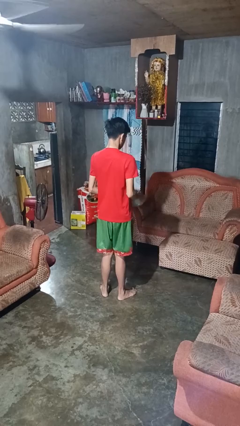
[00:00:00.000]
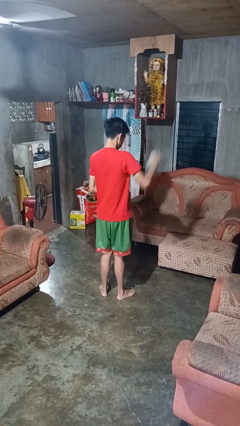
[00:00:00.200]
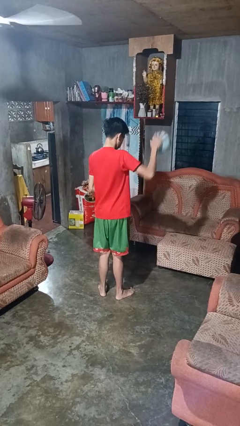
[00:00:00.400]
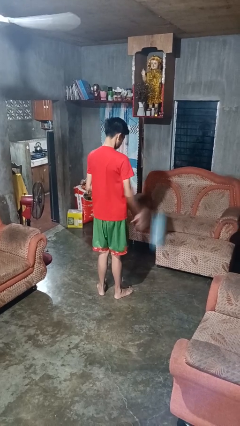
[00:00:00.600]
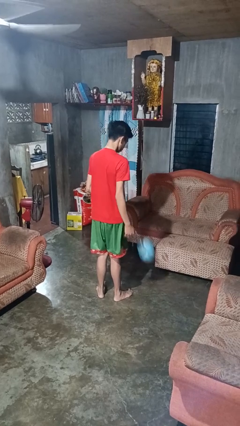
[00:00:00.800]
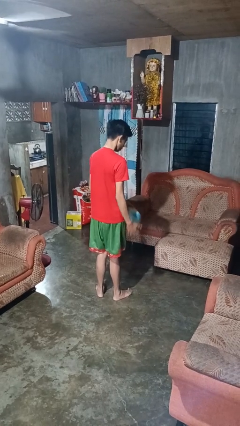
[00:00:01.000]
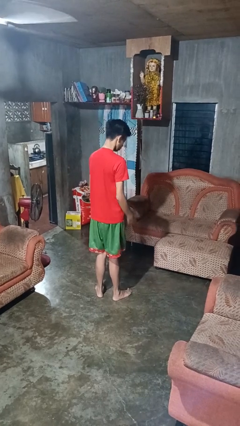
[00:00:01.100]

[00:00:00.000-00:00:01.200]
person bounces ball on floor

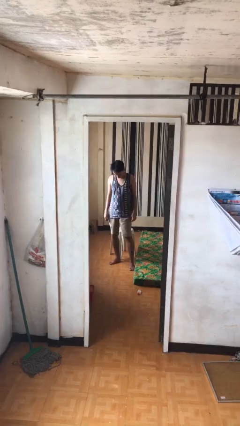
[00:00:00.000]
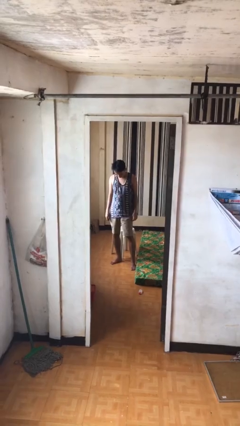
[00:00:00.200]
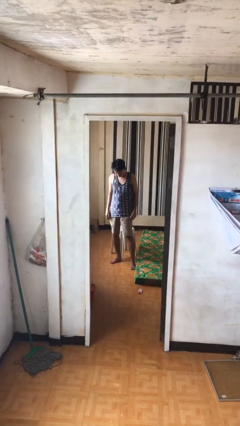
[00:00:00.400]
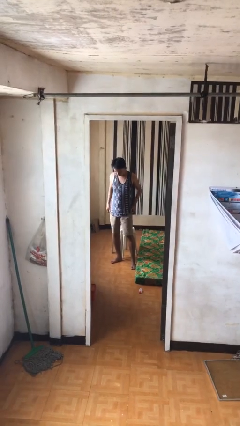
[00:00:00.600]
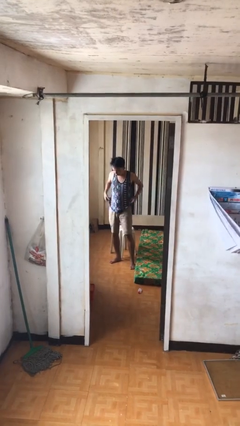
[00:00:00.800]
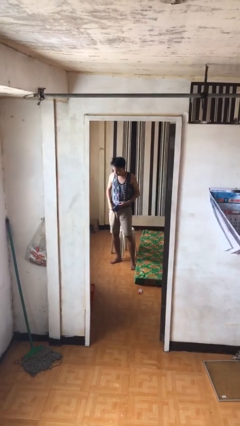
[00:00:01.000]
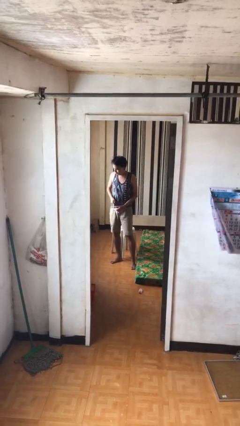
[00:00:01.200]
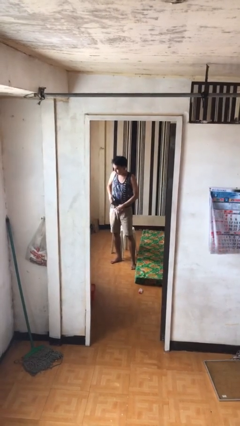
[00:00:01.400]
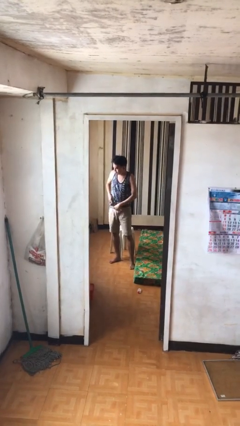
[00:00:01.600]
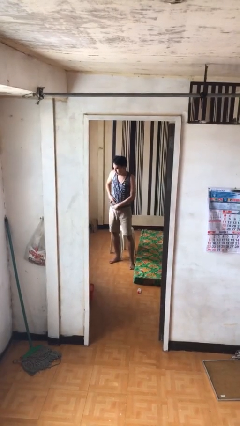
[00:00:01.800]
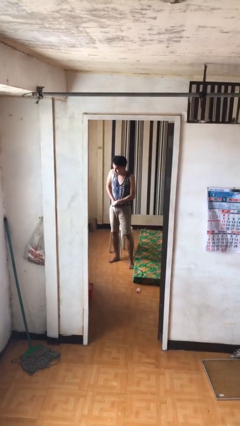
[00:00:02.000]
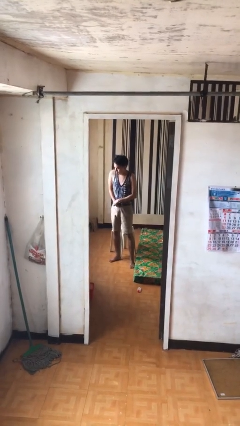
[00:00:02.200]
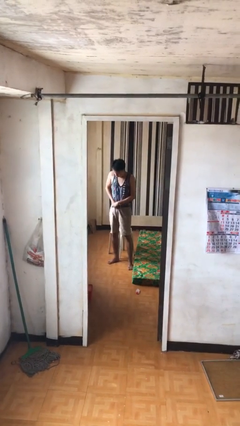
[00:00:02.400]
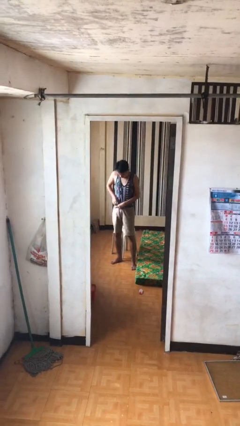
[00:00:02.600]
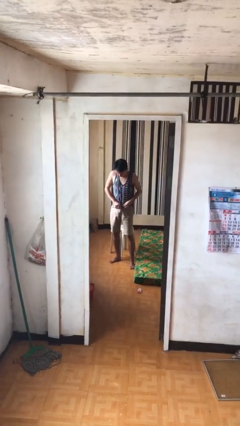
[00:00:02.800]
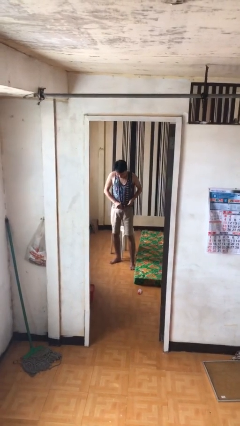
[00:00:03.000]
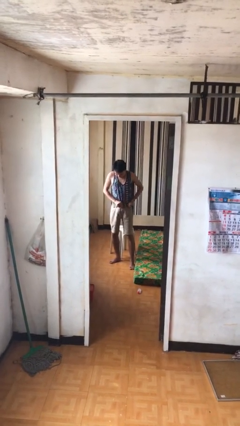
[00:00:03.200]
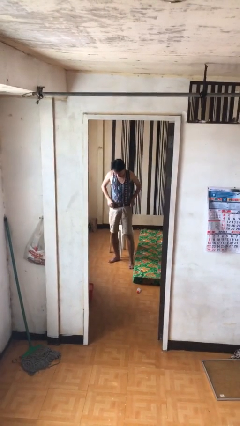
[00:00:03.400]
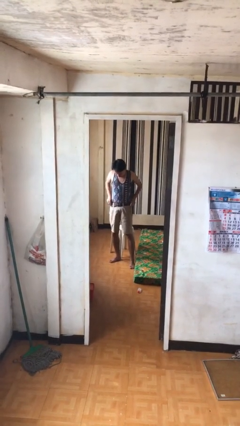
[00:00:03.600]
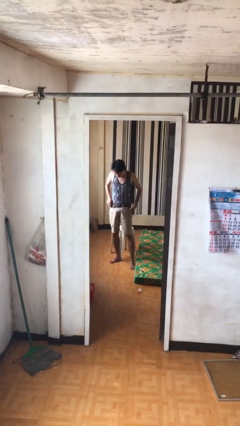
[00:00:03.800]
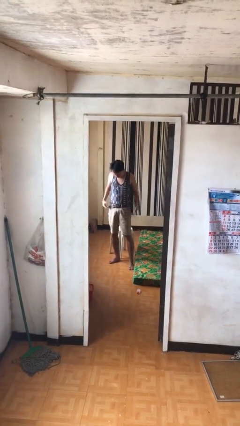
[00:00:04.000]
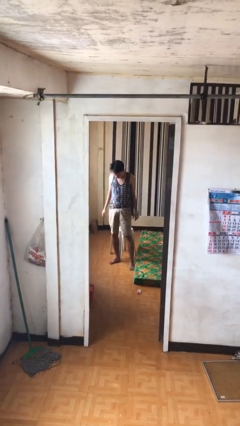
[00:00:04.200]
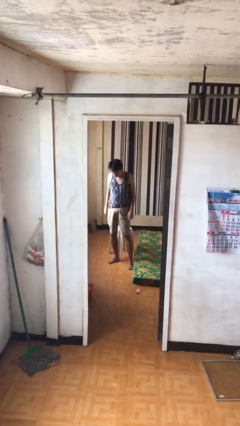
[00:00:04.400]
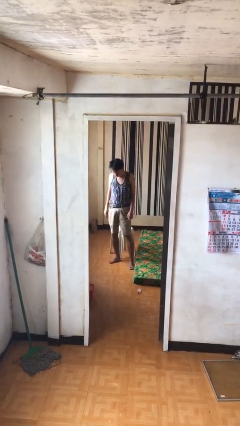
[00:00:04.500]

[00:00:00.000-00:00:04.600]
person tucks in shirt

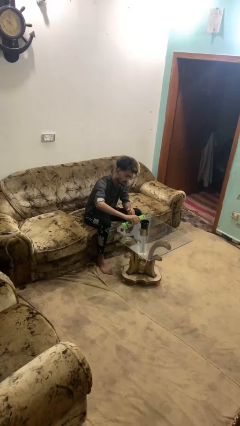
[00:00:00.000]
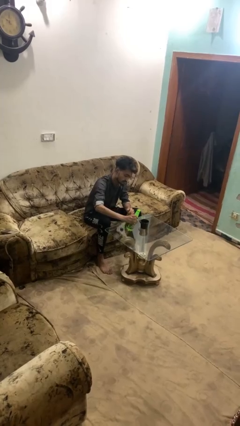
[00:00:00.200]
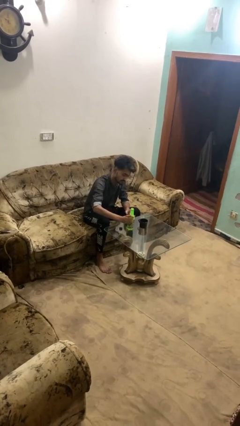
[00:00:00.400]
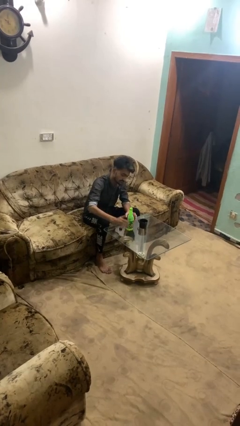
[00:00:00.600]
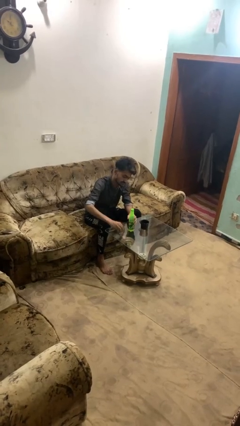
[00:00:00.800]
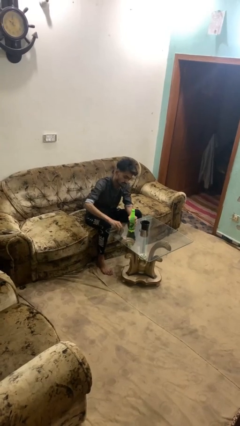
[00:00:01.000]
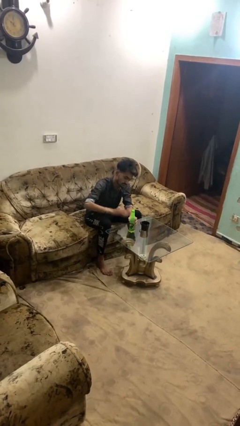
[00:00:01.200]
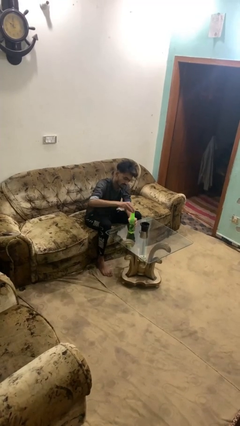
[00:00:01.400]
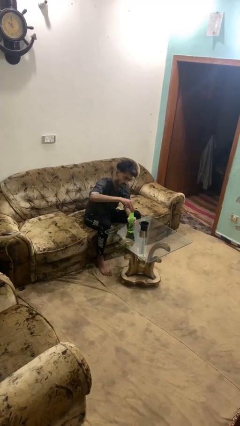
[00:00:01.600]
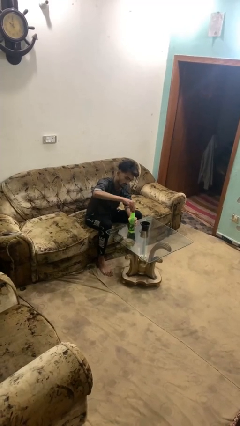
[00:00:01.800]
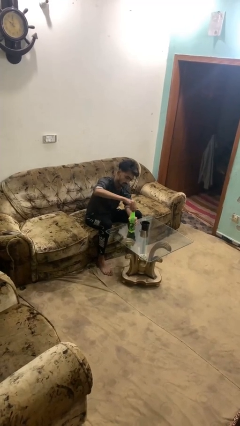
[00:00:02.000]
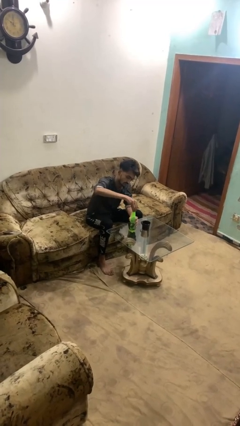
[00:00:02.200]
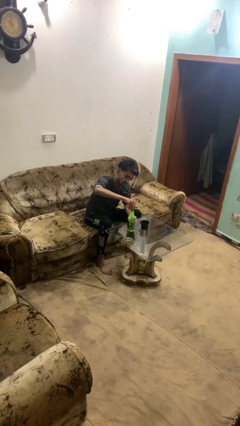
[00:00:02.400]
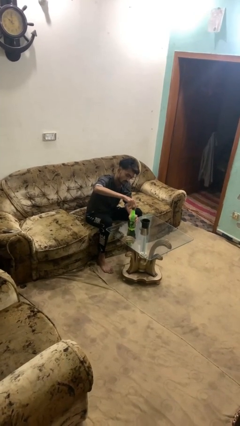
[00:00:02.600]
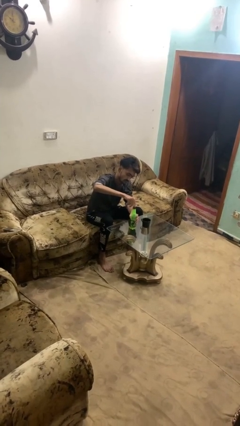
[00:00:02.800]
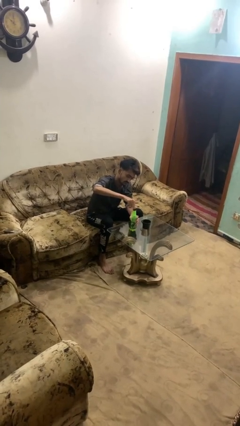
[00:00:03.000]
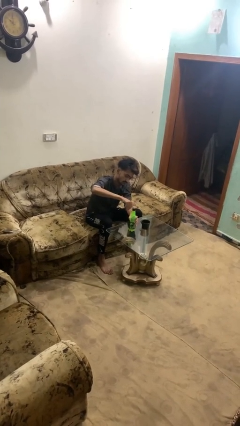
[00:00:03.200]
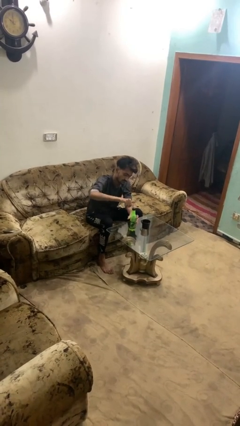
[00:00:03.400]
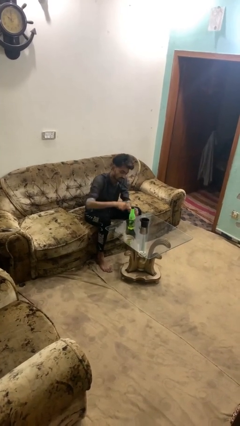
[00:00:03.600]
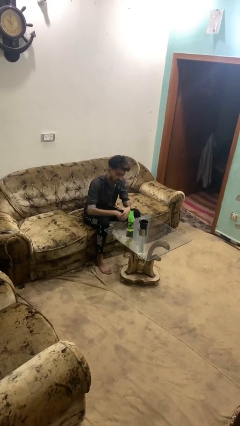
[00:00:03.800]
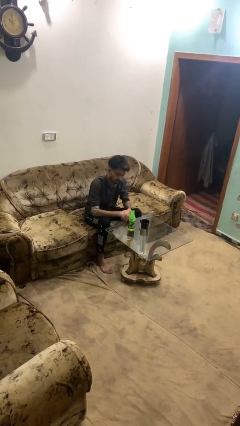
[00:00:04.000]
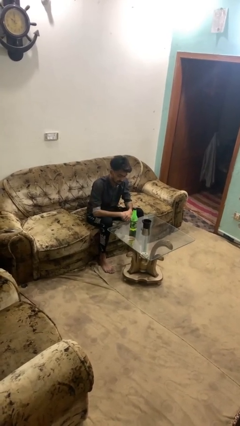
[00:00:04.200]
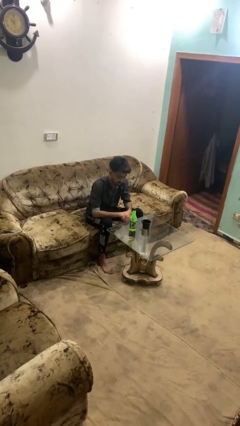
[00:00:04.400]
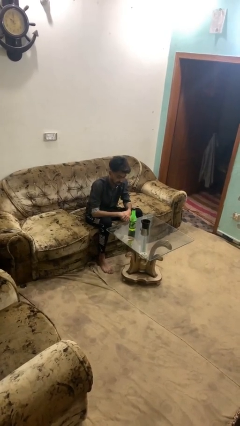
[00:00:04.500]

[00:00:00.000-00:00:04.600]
person screws lid to bottle

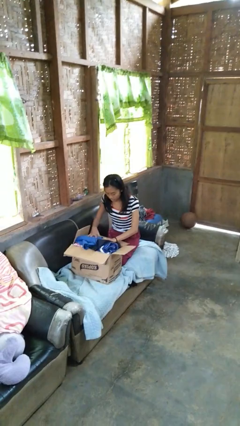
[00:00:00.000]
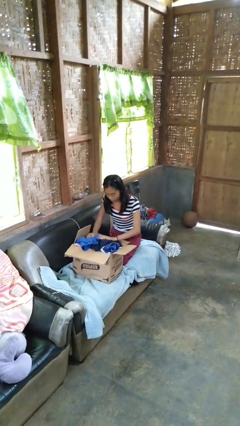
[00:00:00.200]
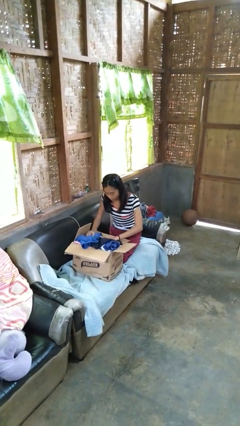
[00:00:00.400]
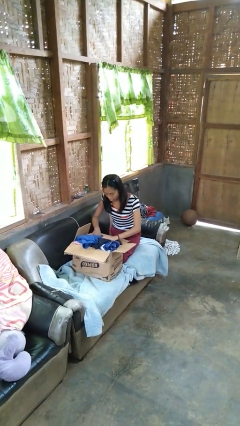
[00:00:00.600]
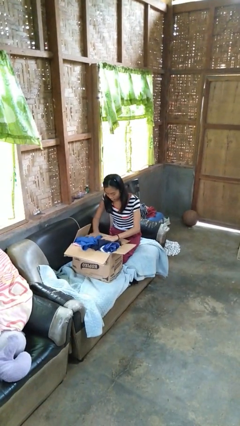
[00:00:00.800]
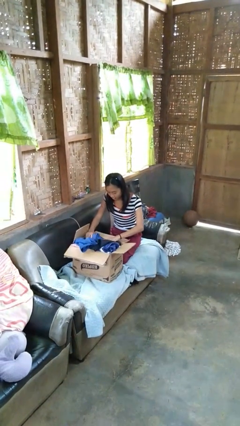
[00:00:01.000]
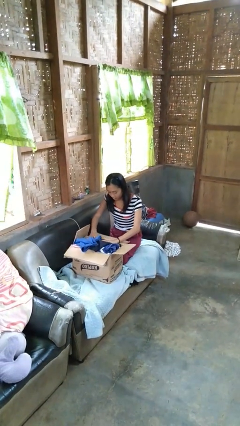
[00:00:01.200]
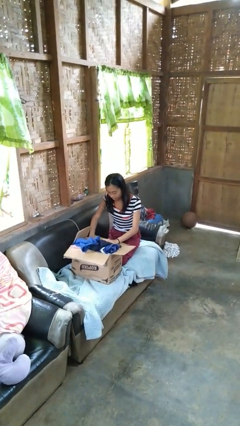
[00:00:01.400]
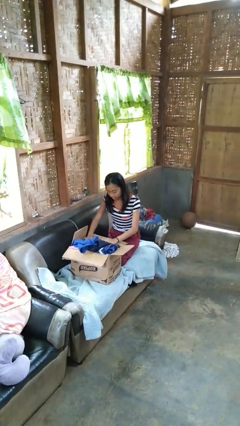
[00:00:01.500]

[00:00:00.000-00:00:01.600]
person searches in box

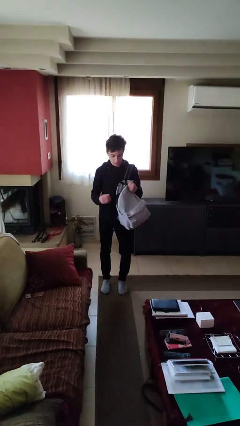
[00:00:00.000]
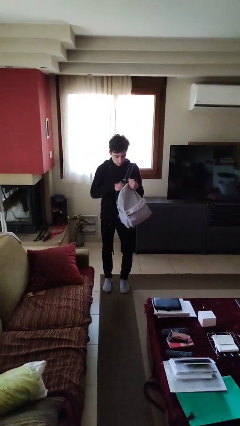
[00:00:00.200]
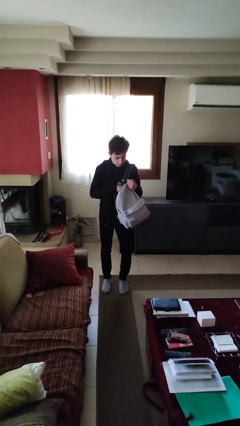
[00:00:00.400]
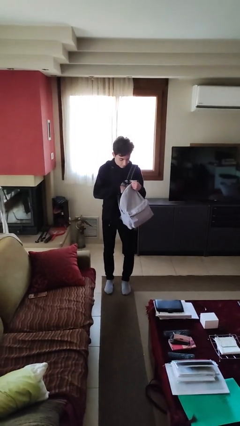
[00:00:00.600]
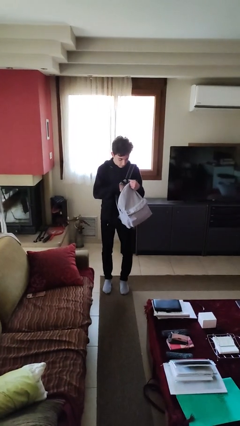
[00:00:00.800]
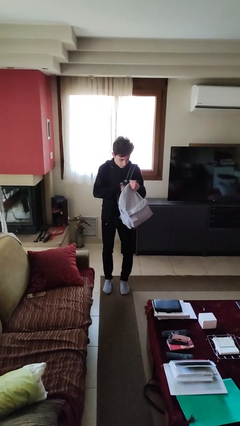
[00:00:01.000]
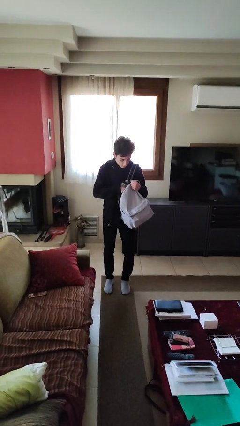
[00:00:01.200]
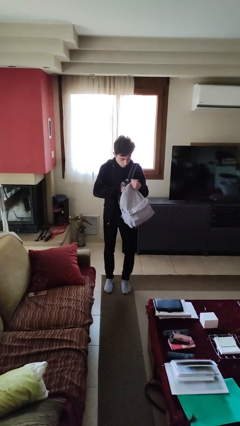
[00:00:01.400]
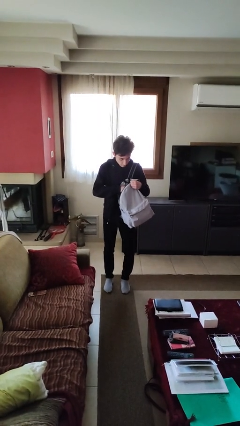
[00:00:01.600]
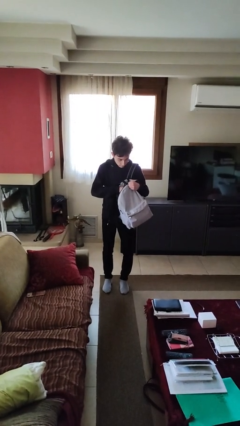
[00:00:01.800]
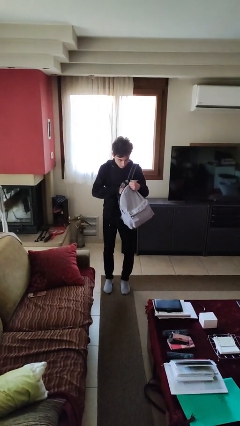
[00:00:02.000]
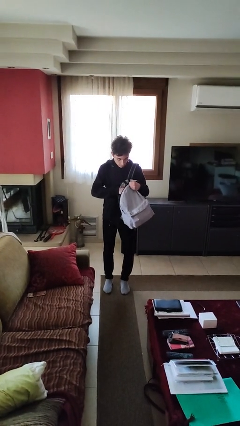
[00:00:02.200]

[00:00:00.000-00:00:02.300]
person searches in backpack

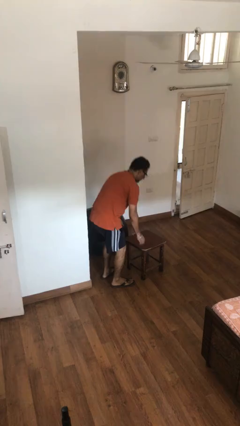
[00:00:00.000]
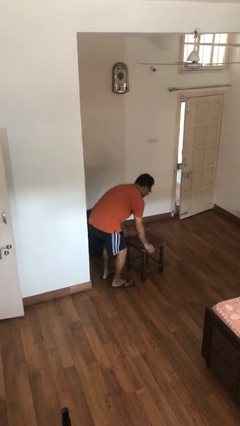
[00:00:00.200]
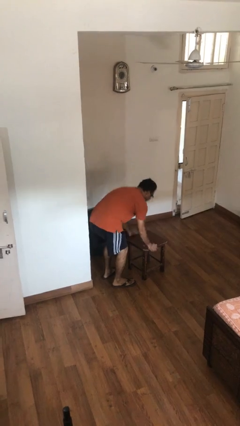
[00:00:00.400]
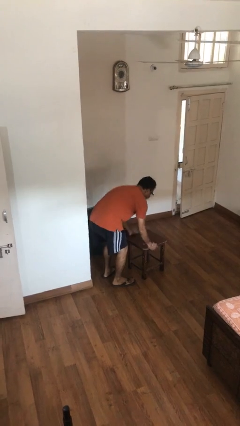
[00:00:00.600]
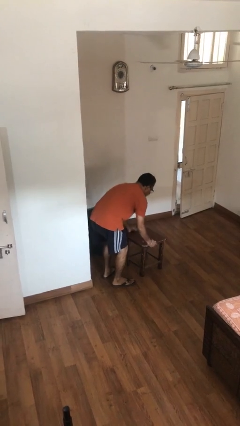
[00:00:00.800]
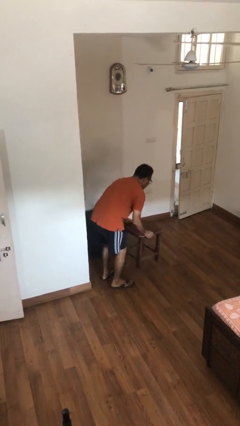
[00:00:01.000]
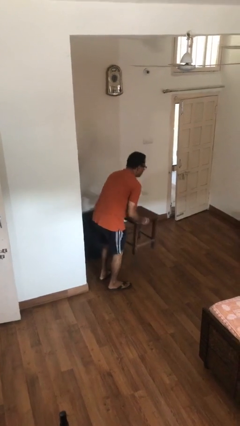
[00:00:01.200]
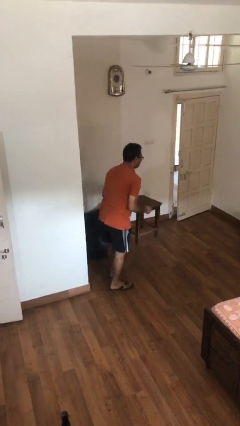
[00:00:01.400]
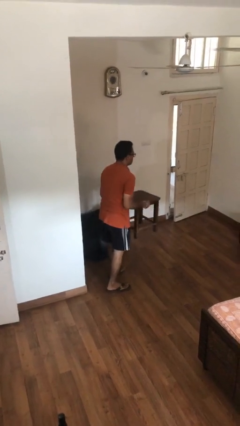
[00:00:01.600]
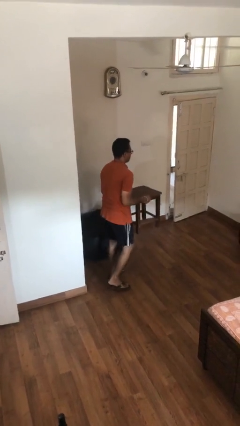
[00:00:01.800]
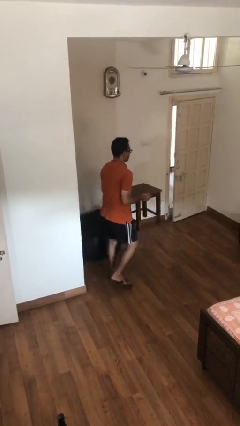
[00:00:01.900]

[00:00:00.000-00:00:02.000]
person picks up object from floor

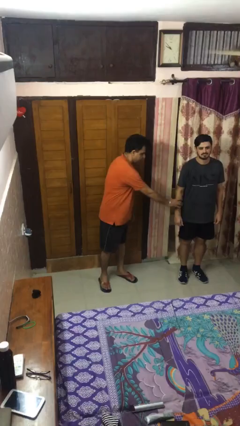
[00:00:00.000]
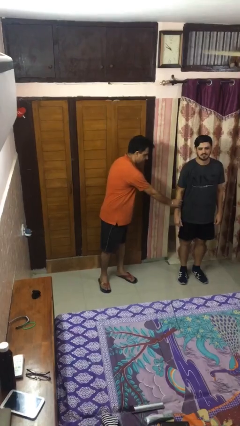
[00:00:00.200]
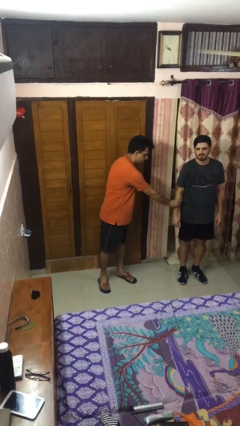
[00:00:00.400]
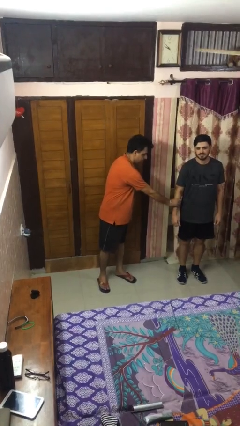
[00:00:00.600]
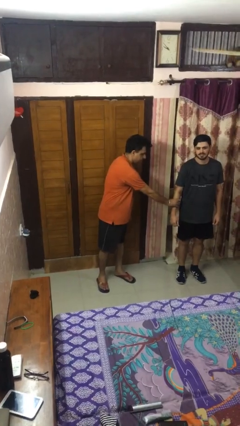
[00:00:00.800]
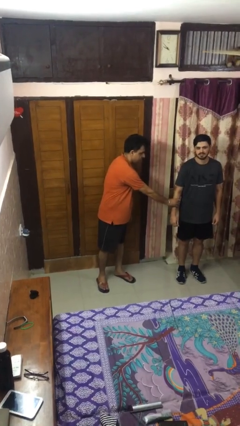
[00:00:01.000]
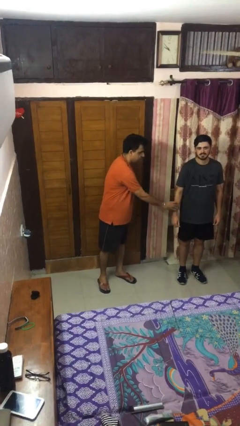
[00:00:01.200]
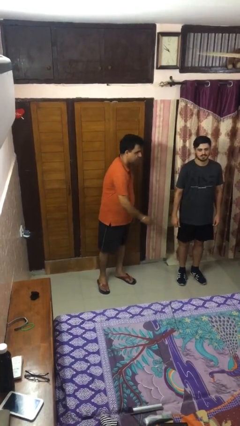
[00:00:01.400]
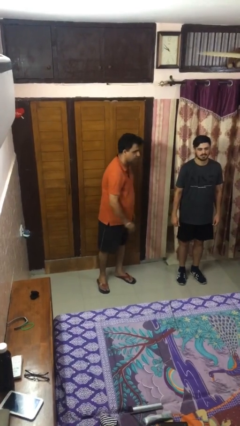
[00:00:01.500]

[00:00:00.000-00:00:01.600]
person grabs person by forearm
